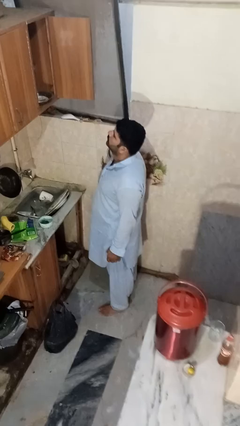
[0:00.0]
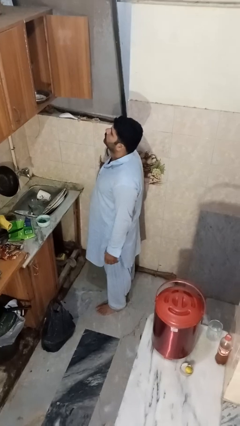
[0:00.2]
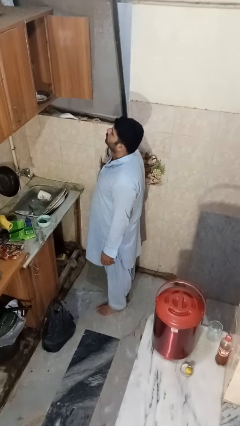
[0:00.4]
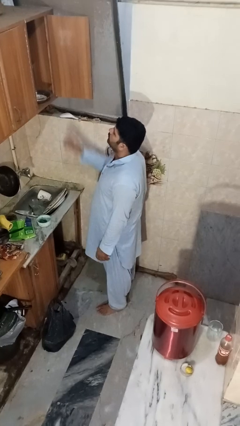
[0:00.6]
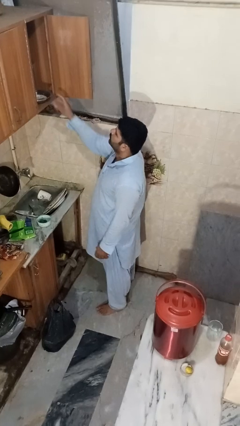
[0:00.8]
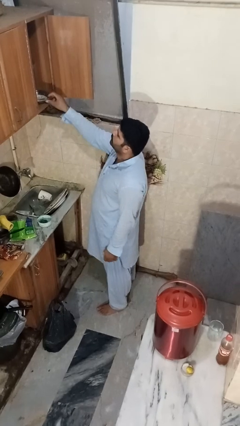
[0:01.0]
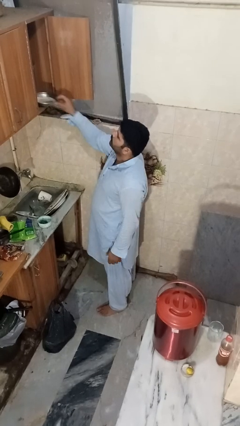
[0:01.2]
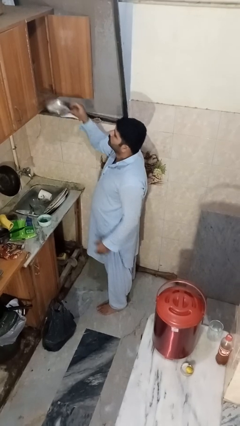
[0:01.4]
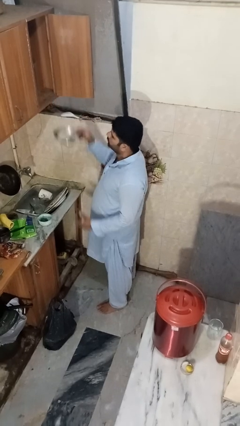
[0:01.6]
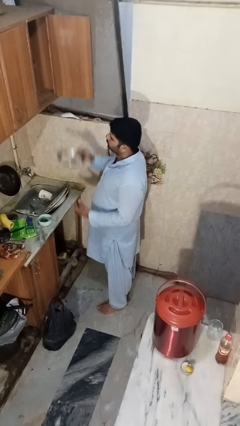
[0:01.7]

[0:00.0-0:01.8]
person takes object from cabinet

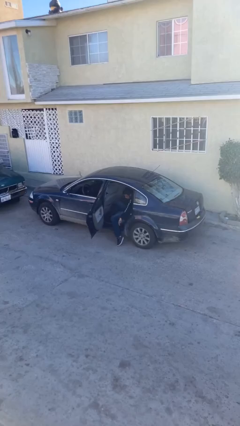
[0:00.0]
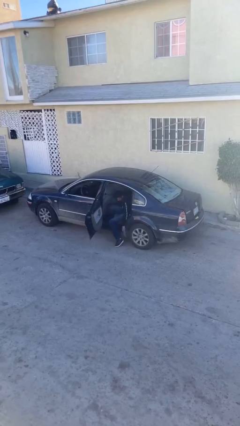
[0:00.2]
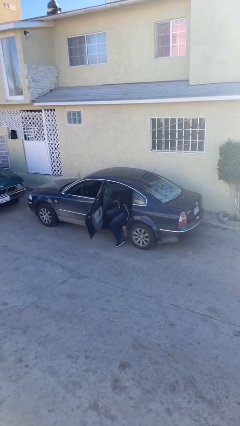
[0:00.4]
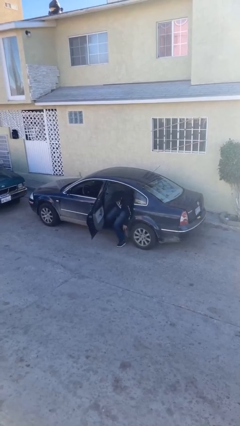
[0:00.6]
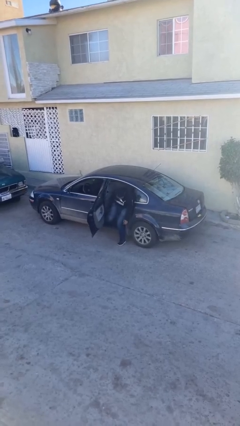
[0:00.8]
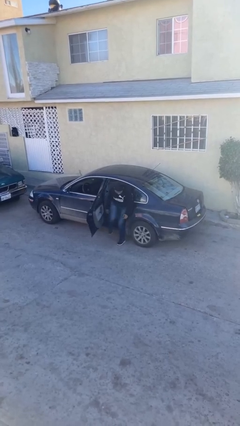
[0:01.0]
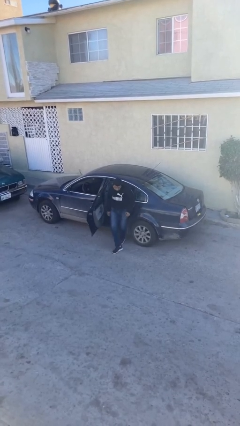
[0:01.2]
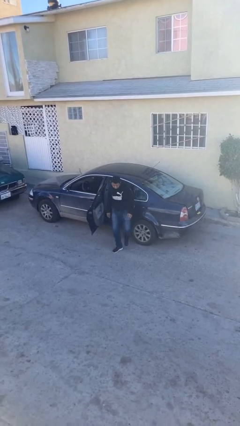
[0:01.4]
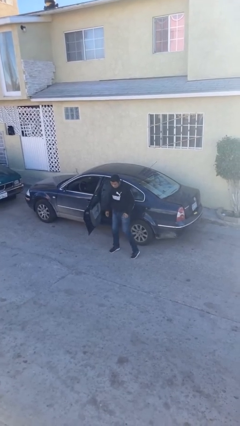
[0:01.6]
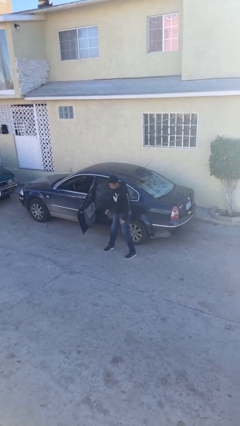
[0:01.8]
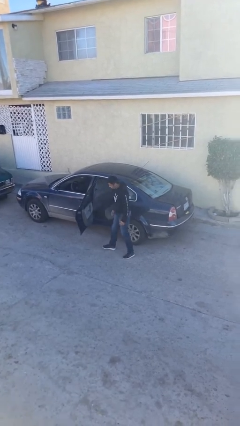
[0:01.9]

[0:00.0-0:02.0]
person exits car

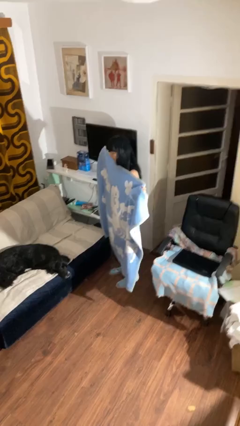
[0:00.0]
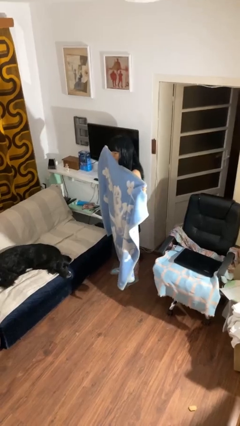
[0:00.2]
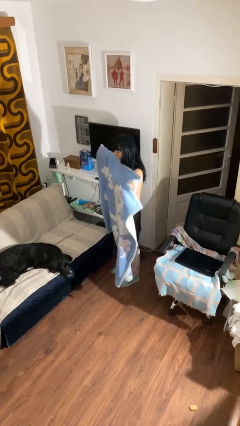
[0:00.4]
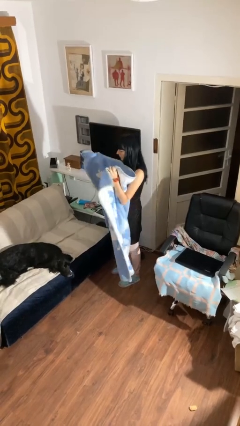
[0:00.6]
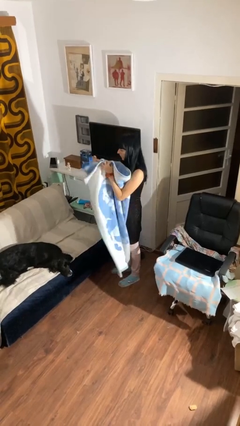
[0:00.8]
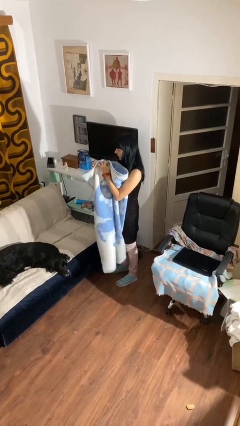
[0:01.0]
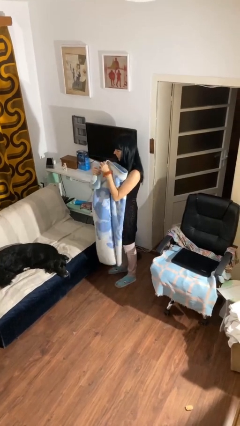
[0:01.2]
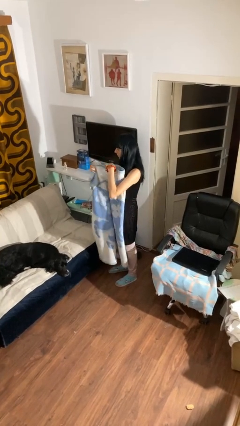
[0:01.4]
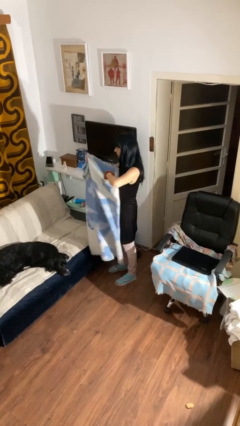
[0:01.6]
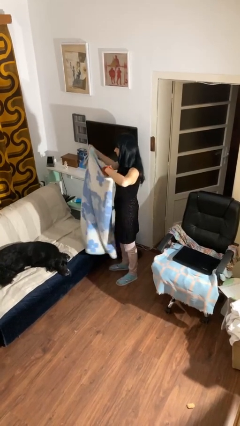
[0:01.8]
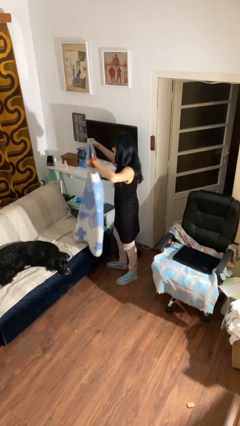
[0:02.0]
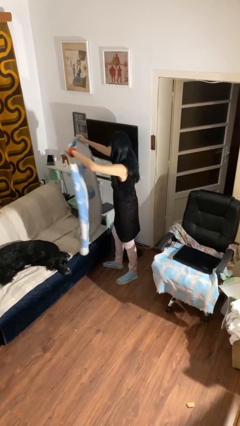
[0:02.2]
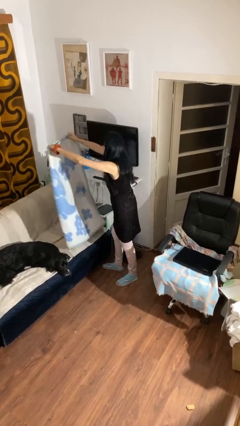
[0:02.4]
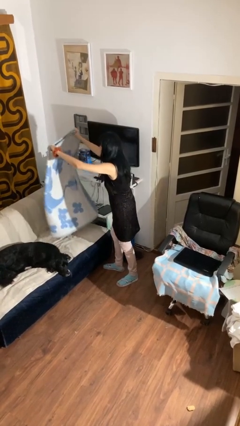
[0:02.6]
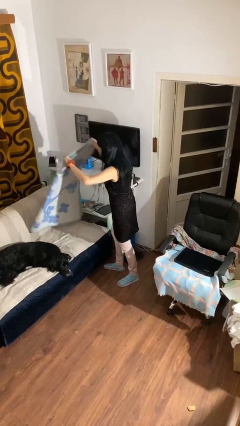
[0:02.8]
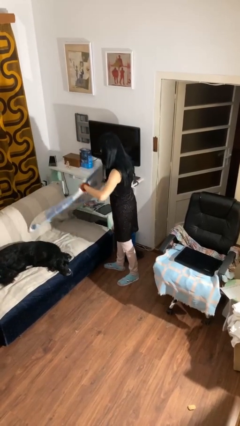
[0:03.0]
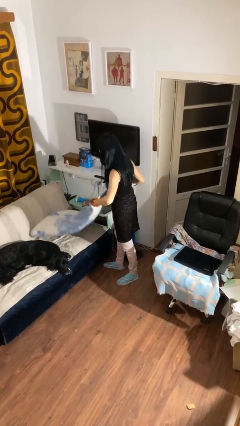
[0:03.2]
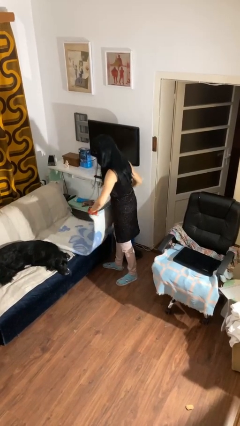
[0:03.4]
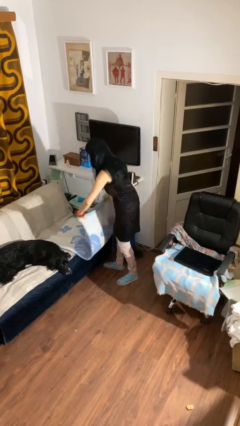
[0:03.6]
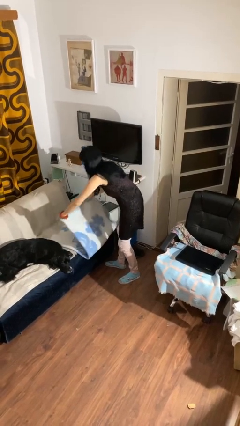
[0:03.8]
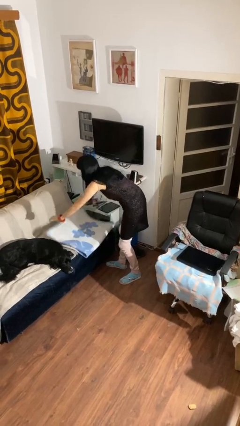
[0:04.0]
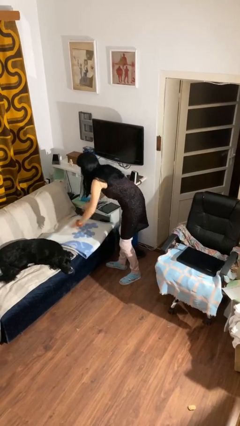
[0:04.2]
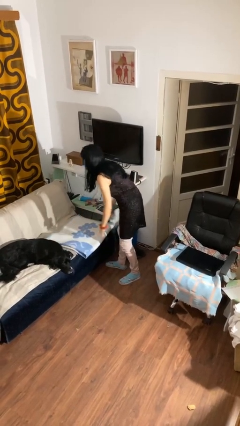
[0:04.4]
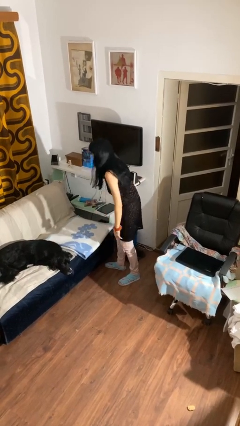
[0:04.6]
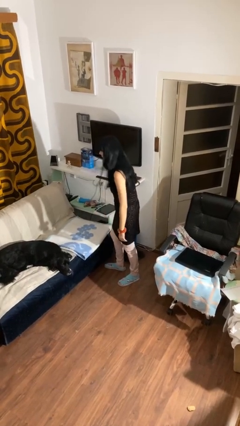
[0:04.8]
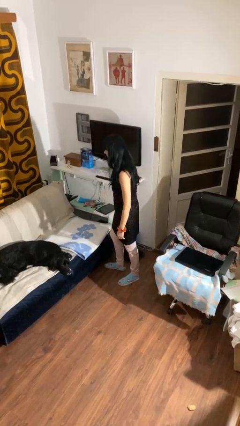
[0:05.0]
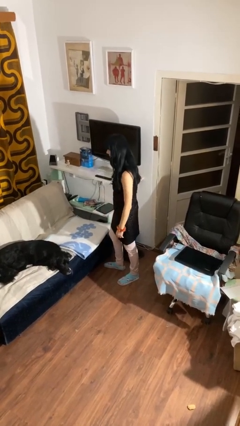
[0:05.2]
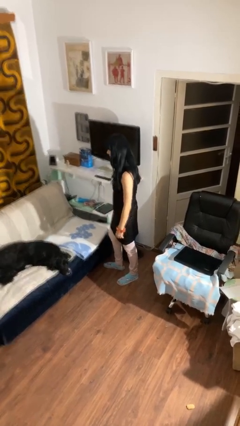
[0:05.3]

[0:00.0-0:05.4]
person folds blanket

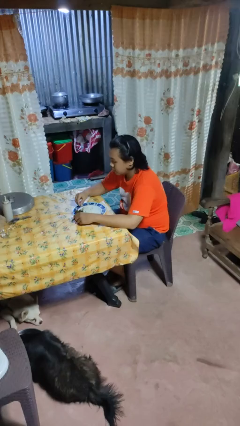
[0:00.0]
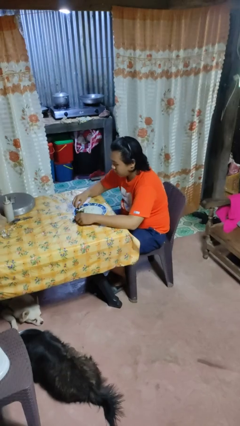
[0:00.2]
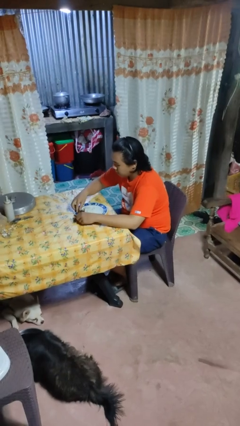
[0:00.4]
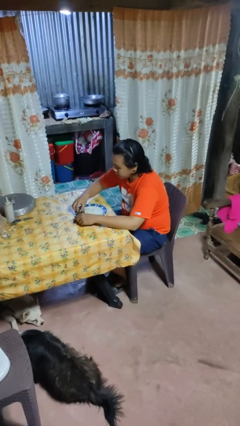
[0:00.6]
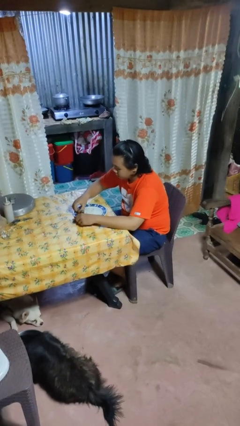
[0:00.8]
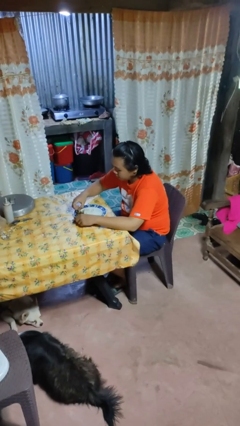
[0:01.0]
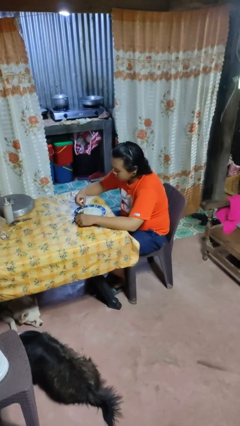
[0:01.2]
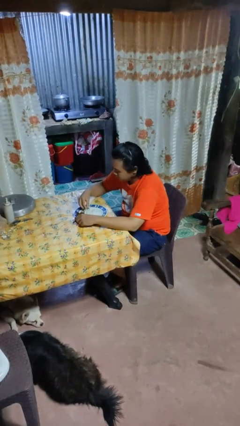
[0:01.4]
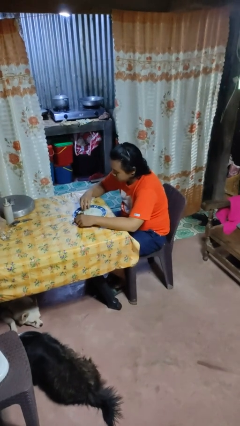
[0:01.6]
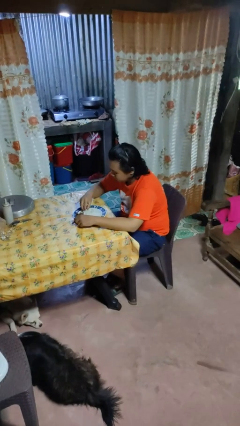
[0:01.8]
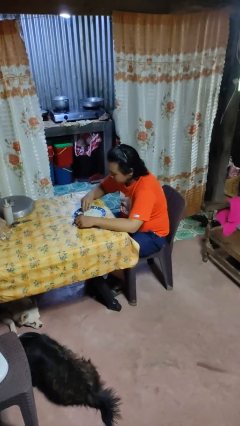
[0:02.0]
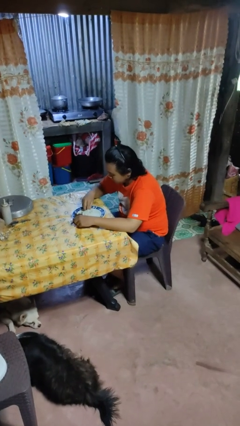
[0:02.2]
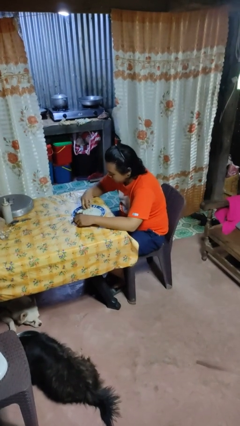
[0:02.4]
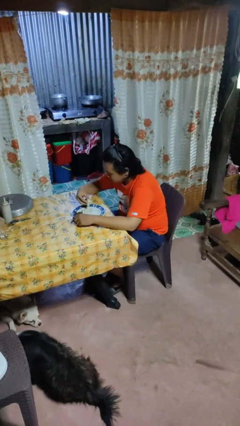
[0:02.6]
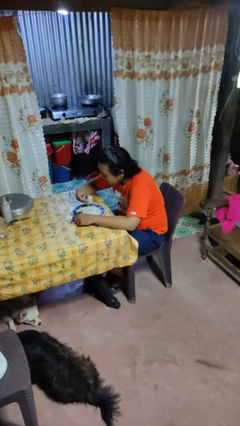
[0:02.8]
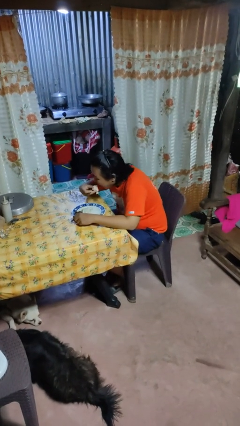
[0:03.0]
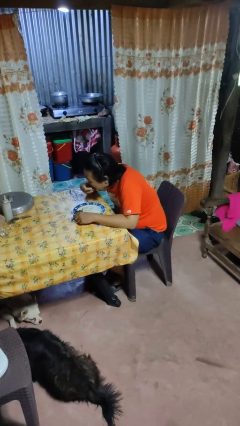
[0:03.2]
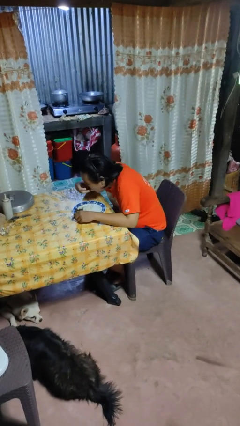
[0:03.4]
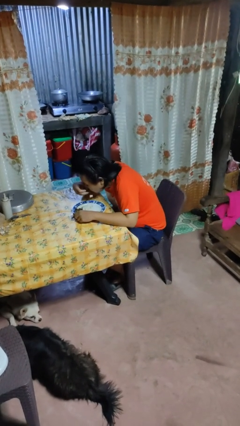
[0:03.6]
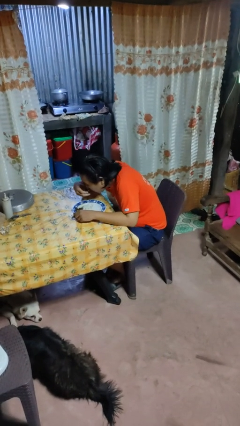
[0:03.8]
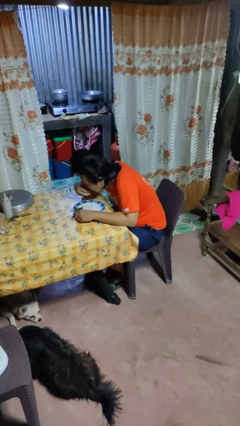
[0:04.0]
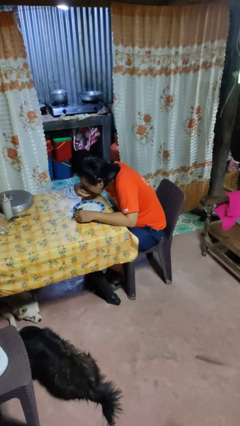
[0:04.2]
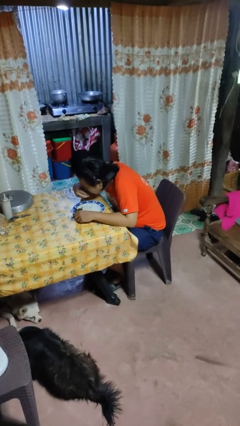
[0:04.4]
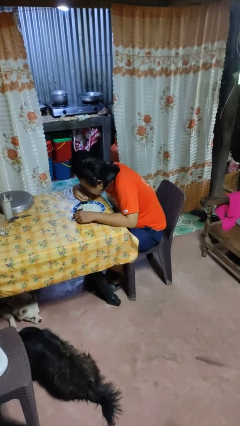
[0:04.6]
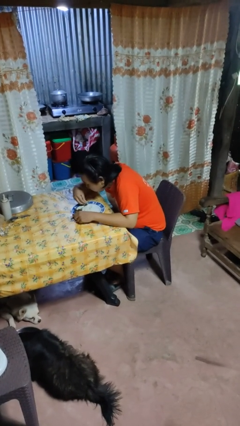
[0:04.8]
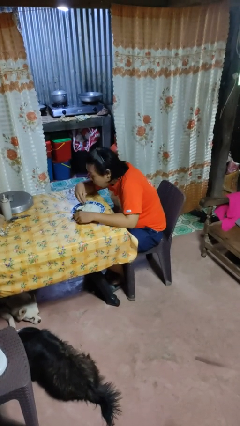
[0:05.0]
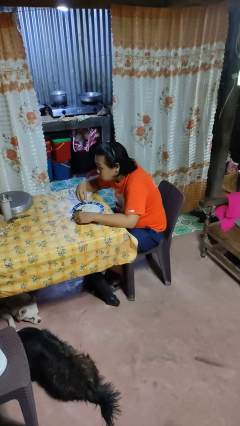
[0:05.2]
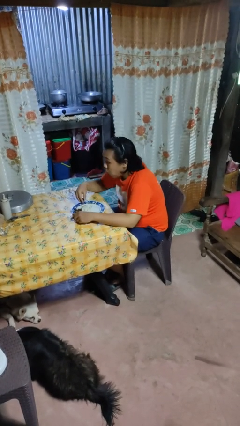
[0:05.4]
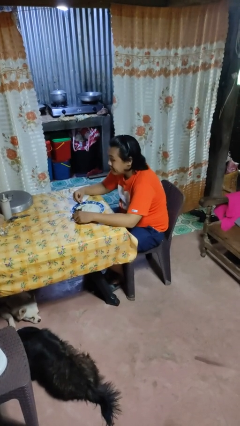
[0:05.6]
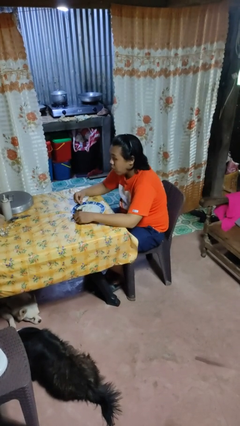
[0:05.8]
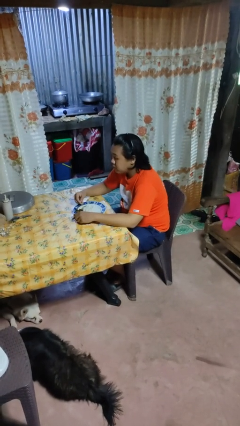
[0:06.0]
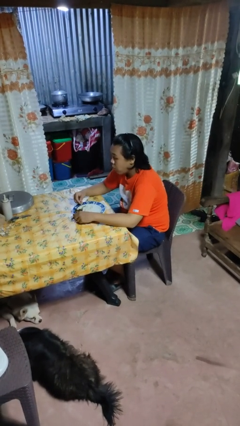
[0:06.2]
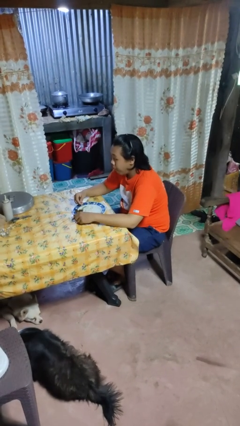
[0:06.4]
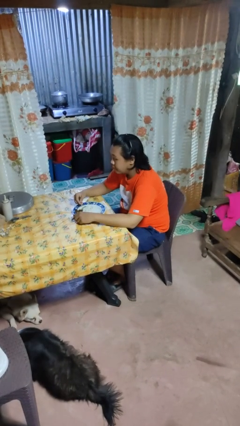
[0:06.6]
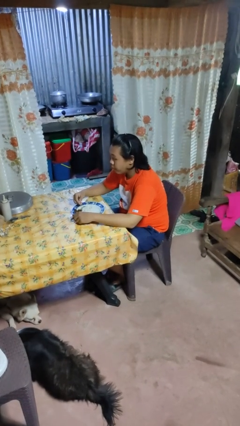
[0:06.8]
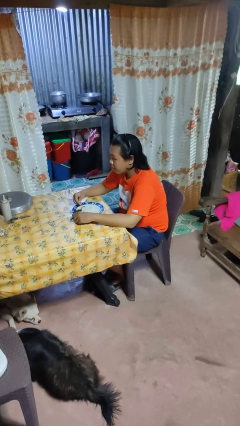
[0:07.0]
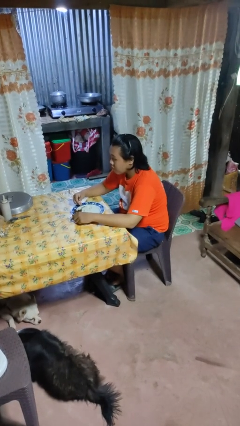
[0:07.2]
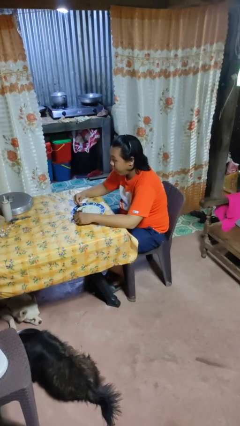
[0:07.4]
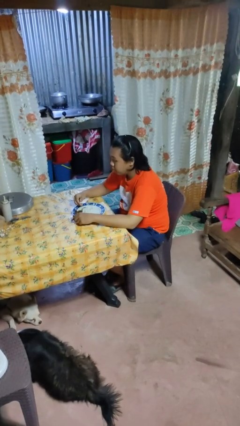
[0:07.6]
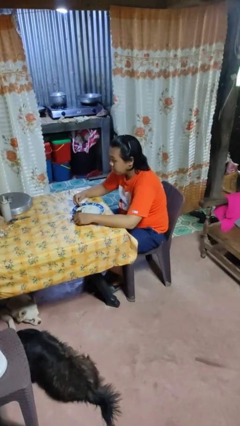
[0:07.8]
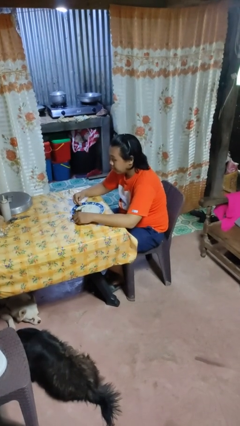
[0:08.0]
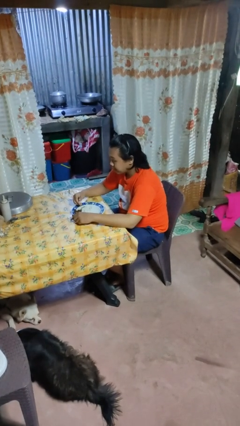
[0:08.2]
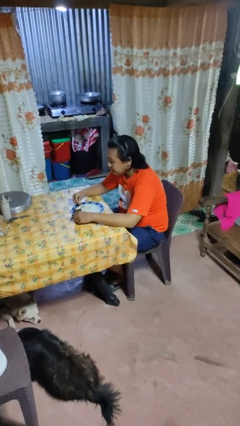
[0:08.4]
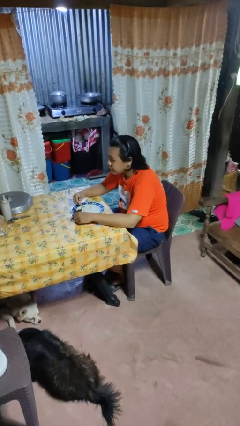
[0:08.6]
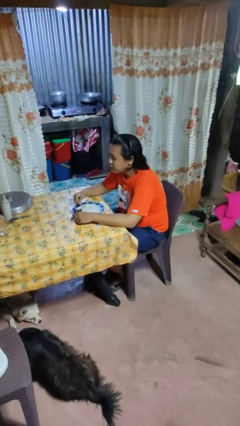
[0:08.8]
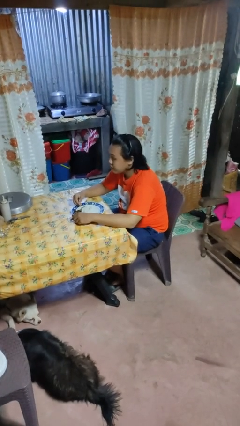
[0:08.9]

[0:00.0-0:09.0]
person eats with hands
